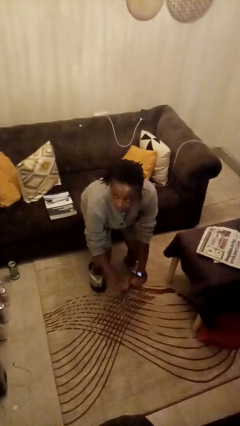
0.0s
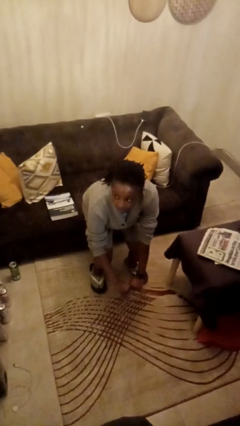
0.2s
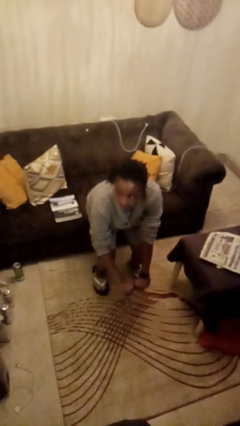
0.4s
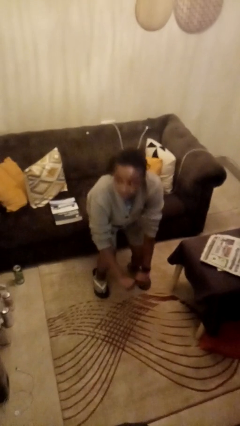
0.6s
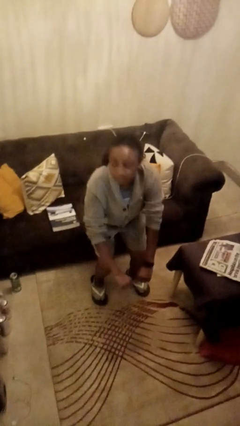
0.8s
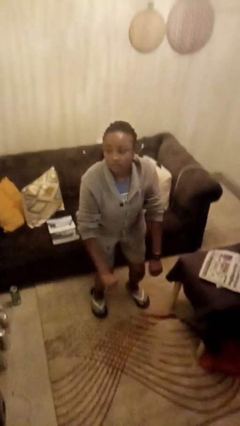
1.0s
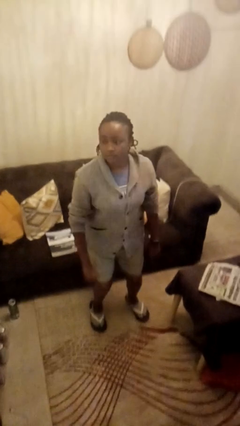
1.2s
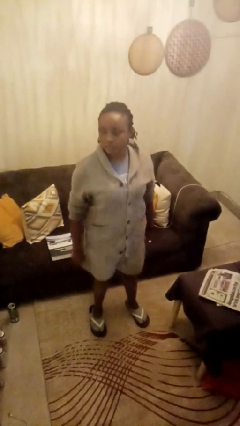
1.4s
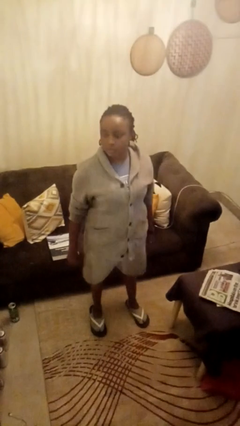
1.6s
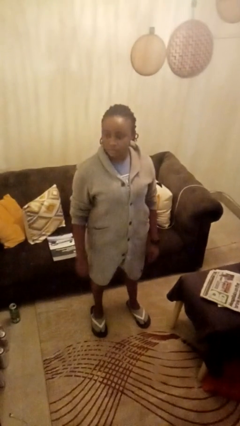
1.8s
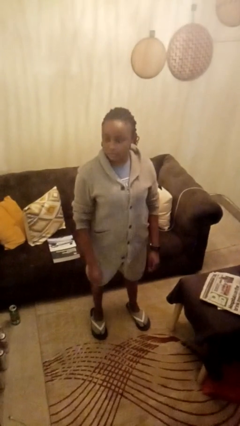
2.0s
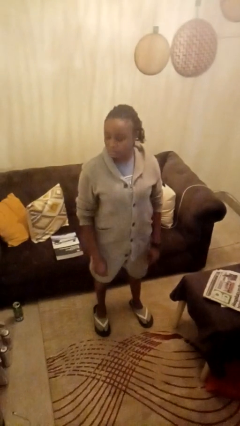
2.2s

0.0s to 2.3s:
person stands up

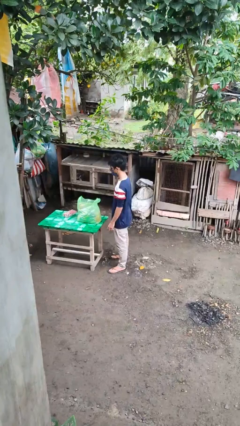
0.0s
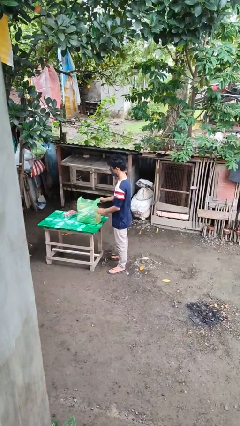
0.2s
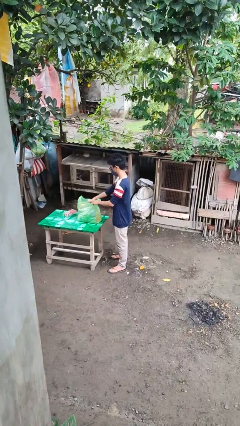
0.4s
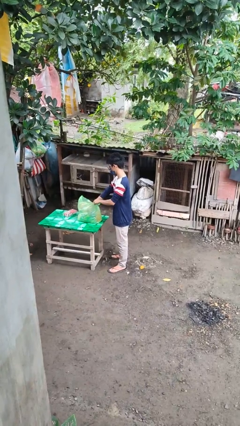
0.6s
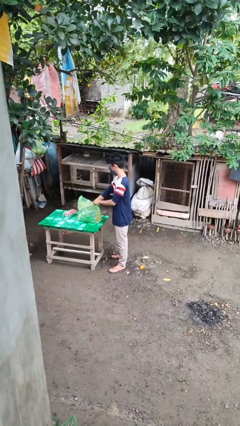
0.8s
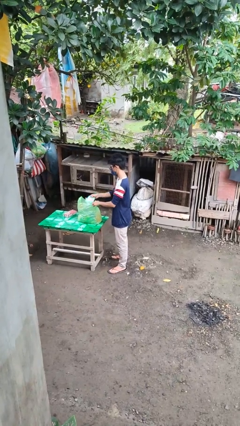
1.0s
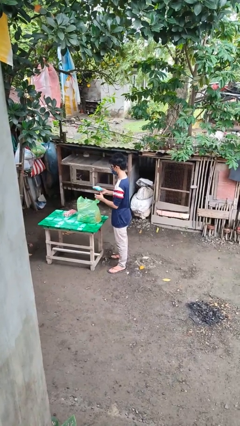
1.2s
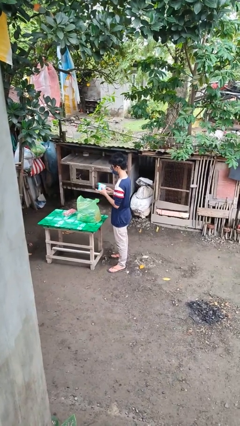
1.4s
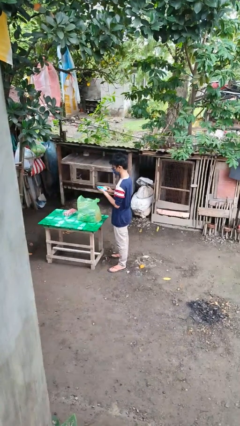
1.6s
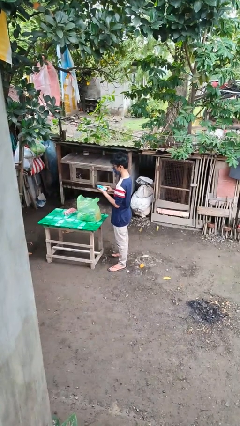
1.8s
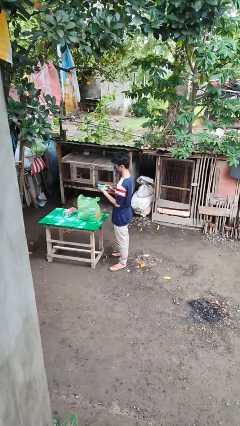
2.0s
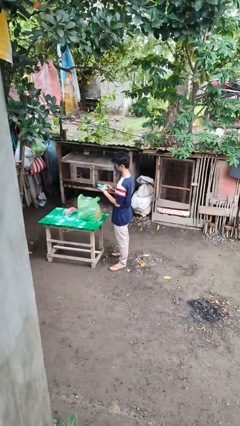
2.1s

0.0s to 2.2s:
person takes object from bag

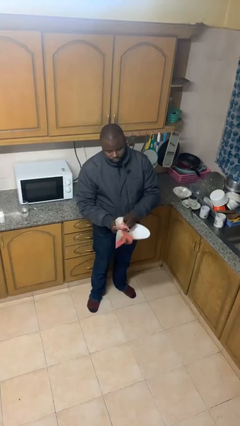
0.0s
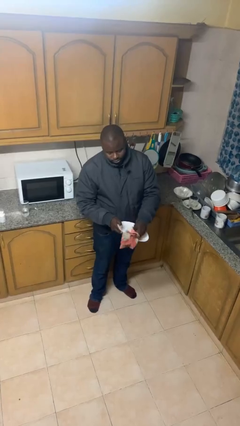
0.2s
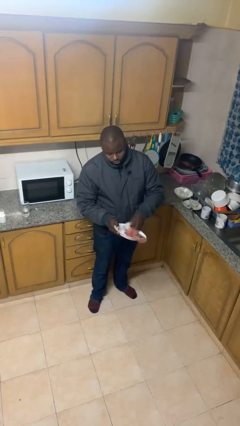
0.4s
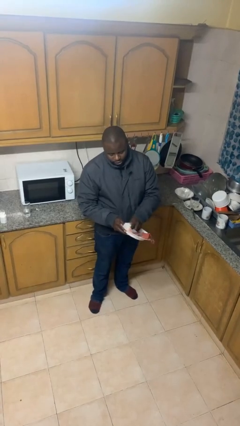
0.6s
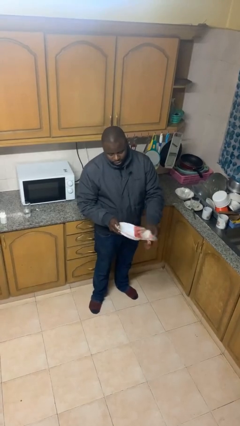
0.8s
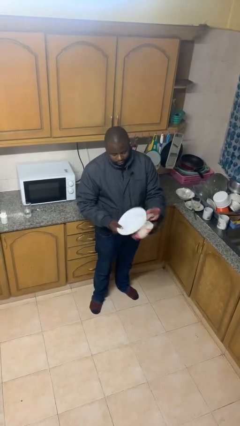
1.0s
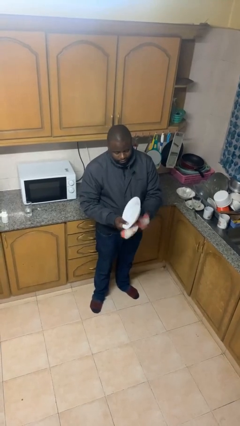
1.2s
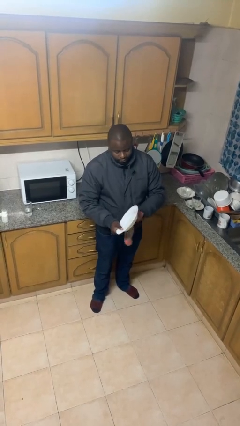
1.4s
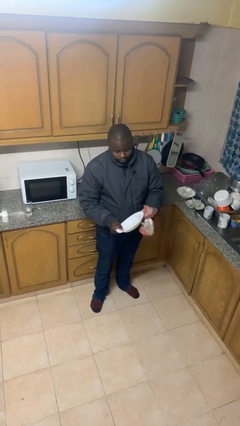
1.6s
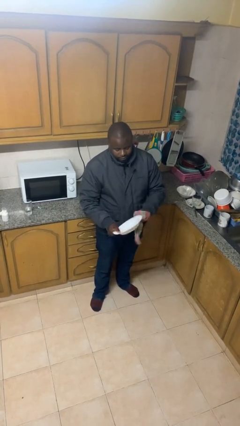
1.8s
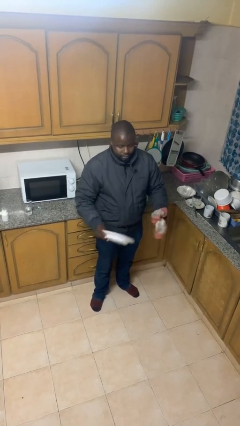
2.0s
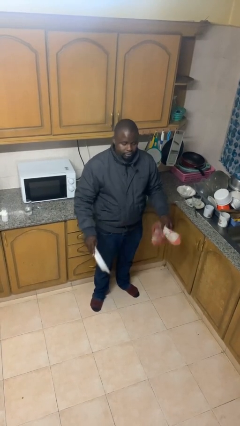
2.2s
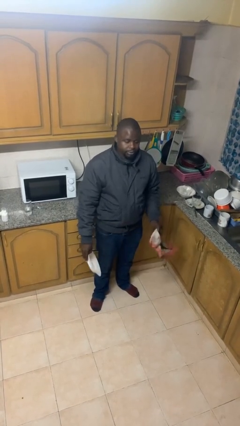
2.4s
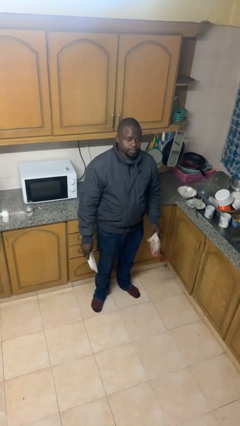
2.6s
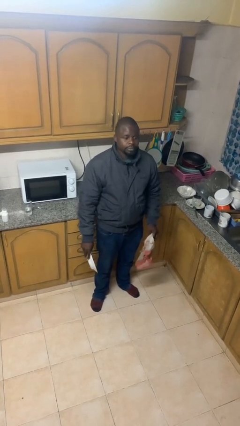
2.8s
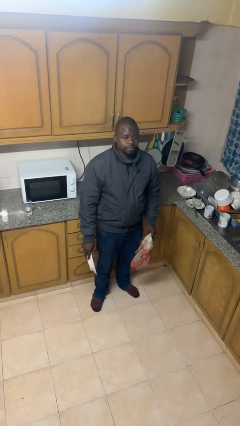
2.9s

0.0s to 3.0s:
person dries dish

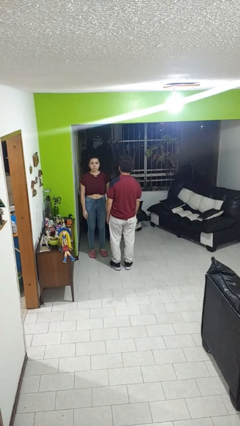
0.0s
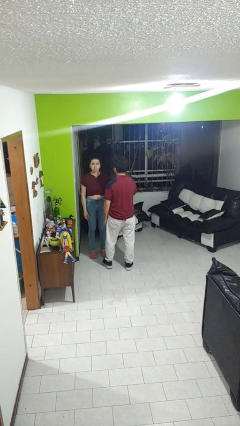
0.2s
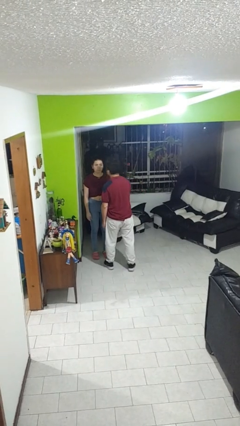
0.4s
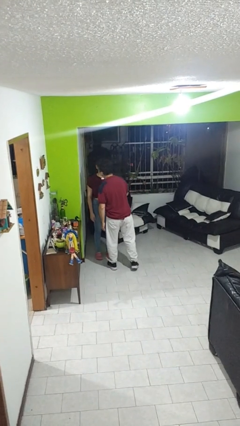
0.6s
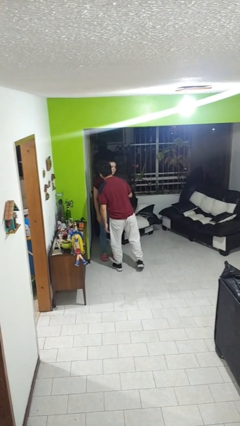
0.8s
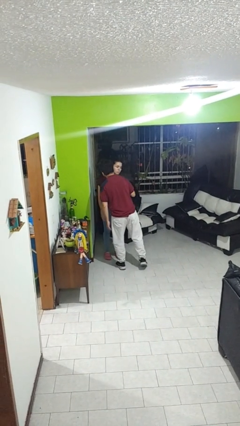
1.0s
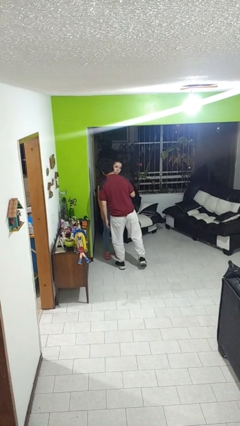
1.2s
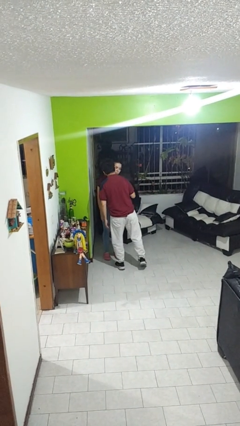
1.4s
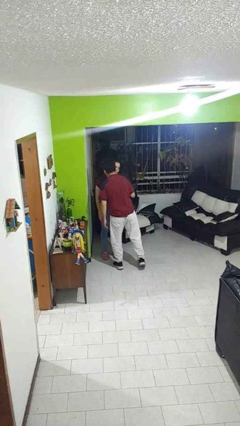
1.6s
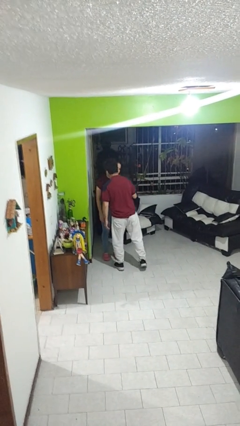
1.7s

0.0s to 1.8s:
person kisses cheek of person

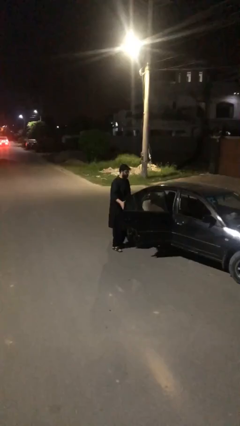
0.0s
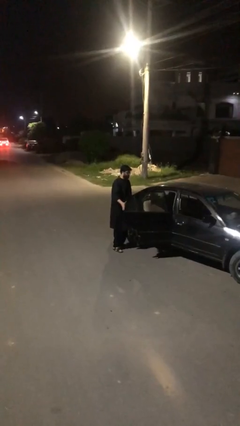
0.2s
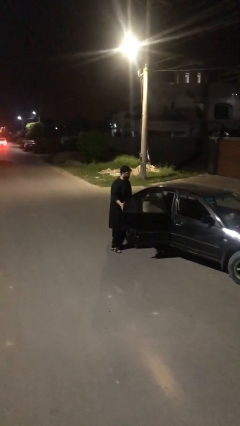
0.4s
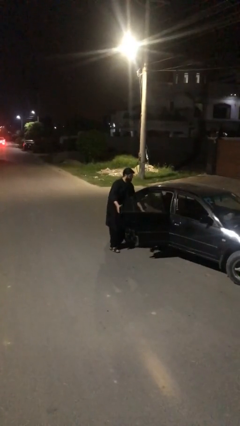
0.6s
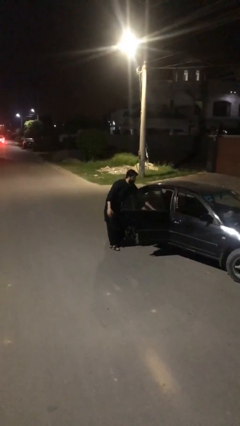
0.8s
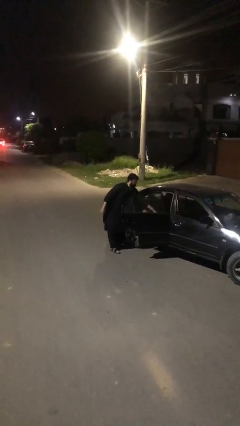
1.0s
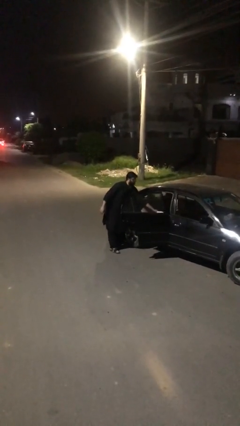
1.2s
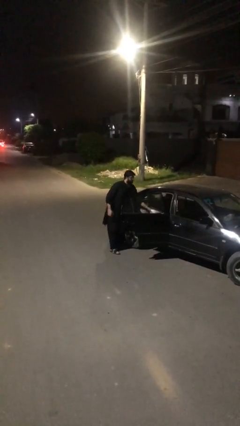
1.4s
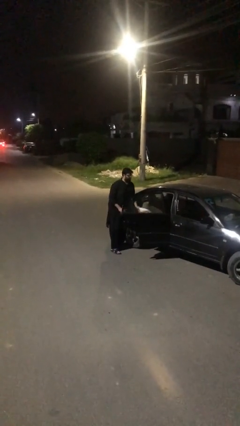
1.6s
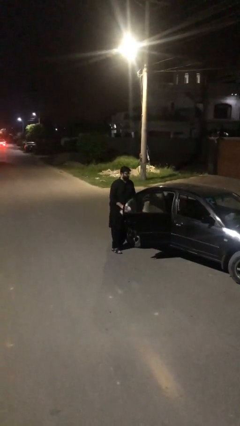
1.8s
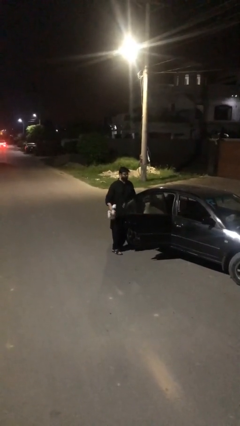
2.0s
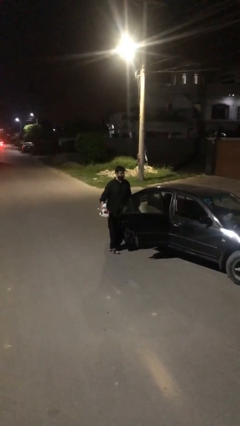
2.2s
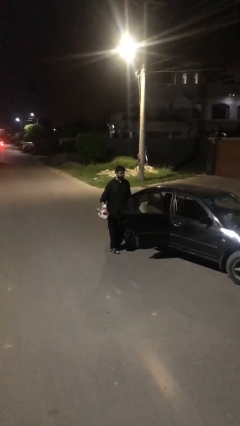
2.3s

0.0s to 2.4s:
person unloads car

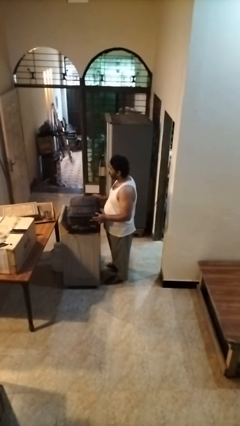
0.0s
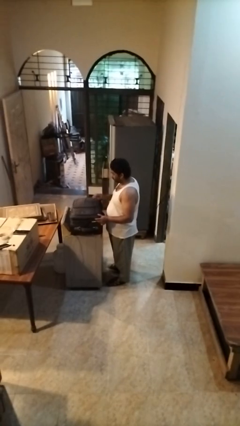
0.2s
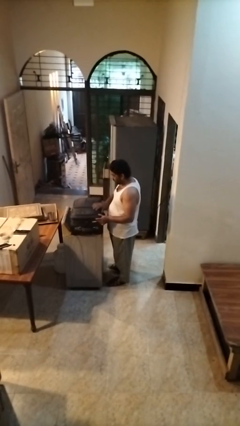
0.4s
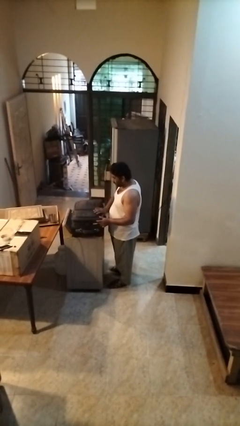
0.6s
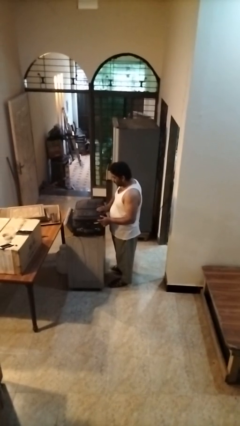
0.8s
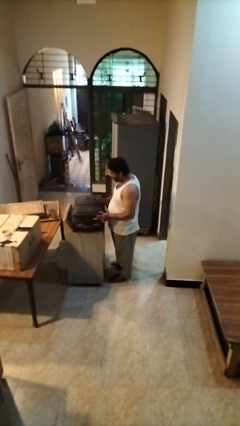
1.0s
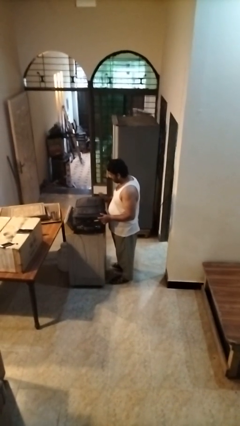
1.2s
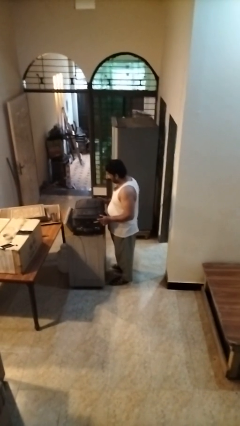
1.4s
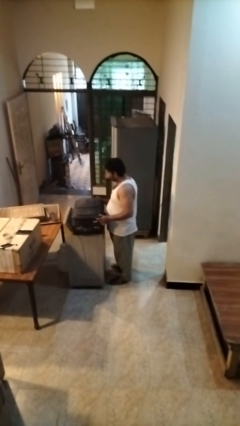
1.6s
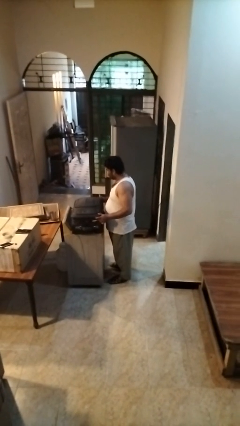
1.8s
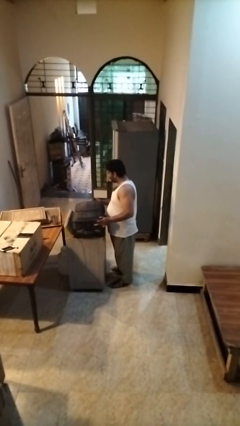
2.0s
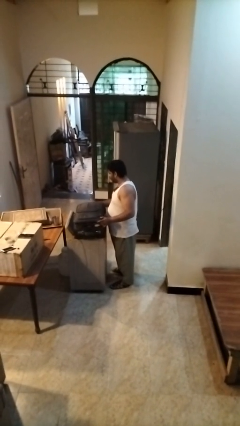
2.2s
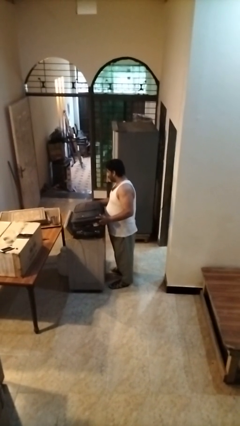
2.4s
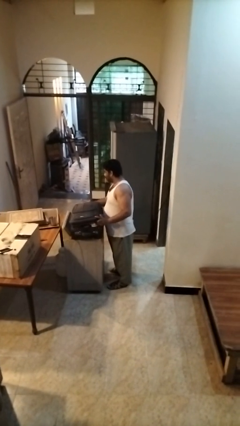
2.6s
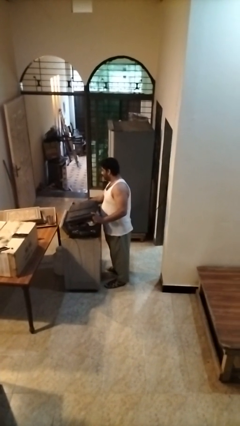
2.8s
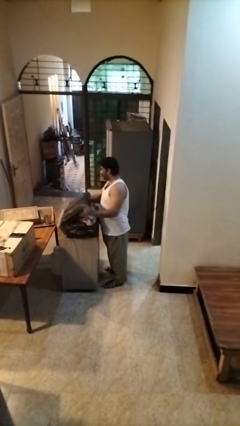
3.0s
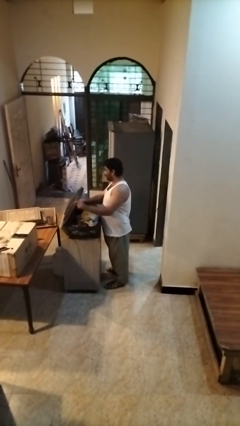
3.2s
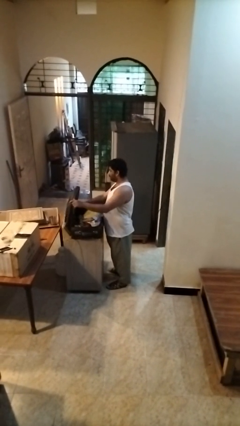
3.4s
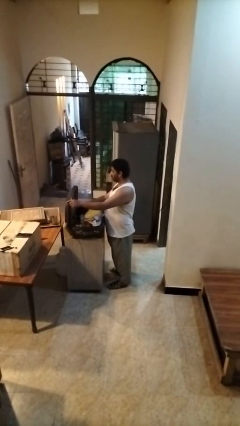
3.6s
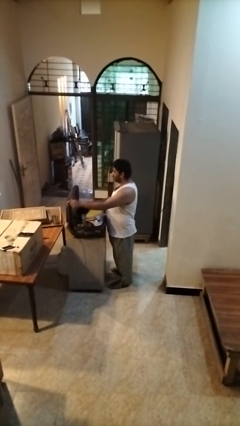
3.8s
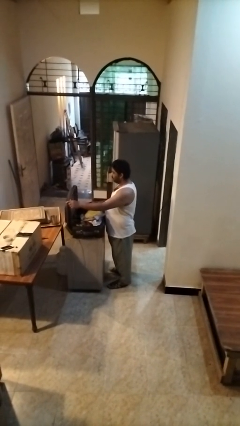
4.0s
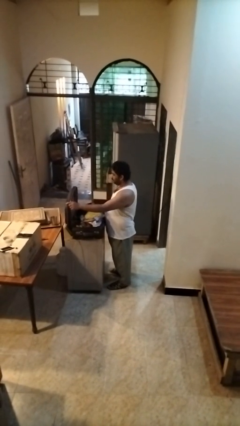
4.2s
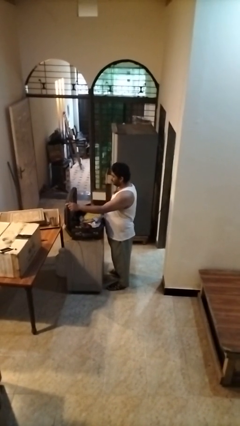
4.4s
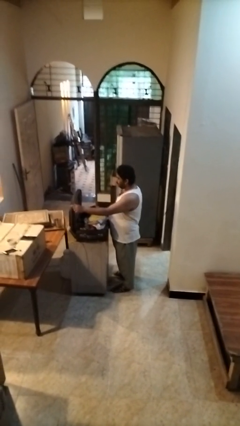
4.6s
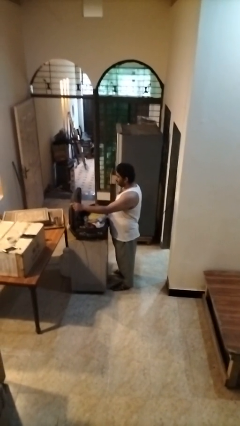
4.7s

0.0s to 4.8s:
person opens suitcase

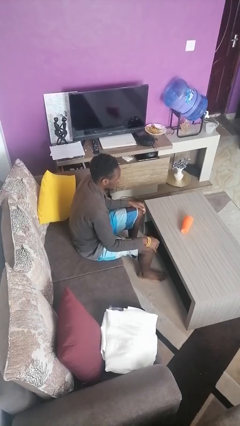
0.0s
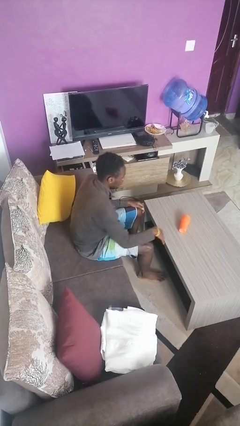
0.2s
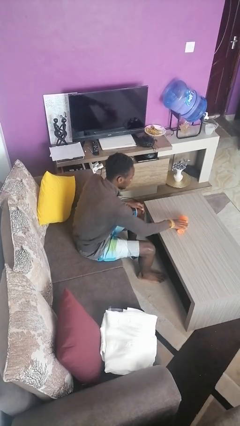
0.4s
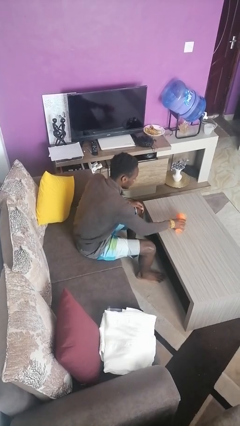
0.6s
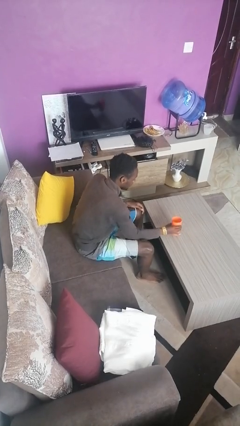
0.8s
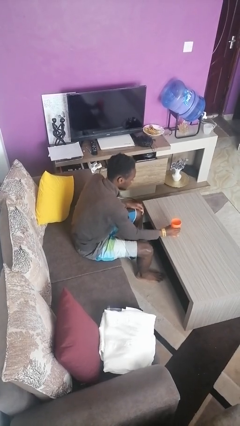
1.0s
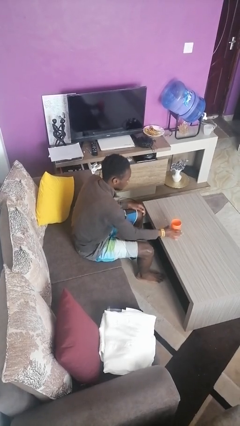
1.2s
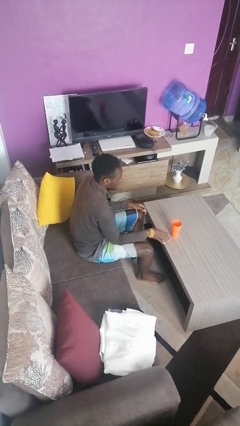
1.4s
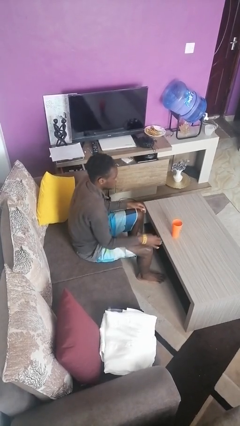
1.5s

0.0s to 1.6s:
person sets upright glass
